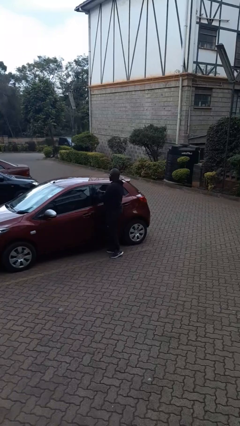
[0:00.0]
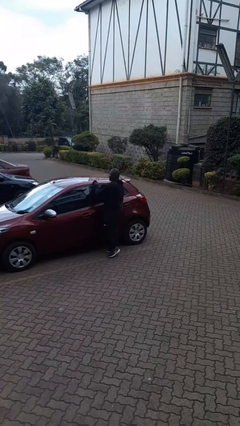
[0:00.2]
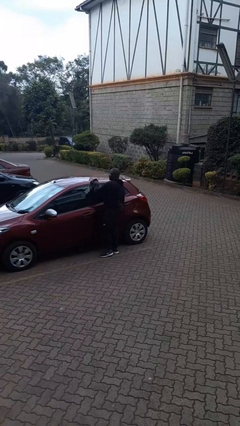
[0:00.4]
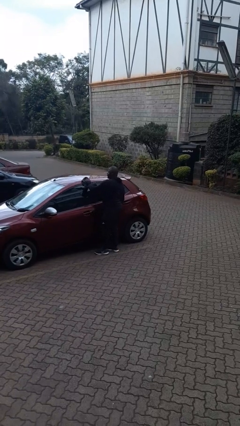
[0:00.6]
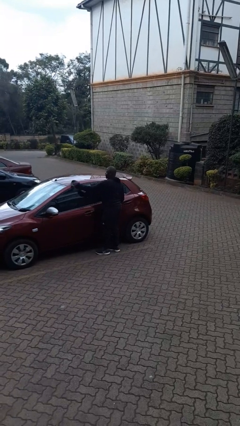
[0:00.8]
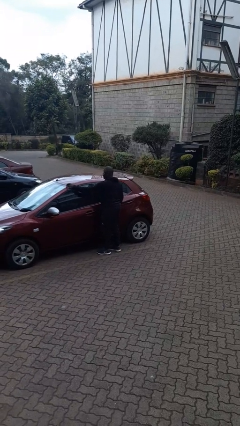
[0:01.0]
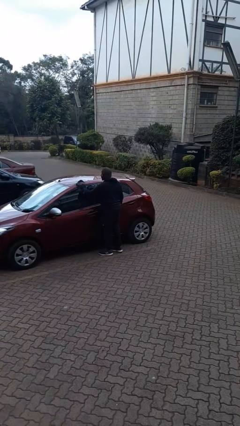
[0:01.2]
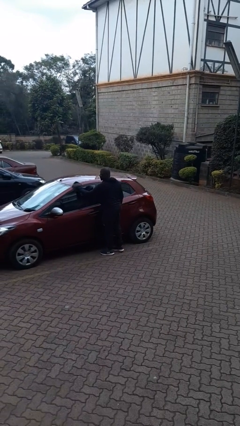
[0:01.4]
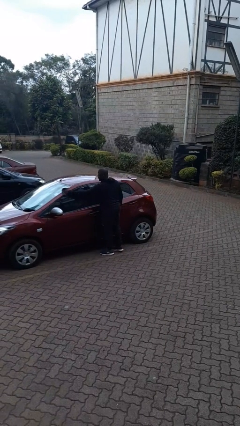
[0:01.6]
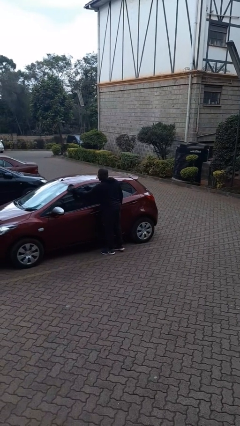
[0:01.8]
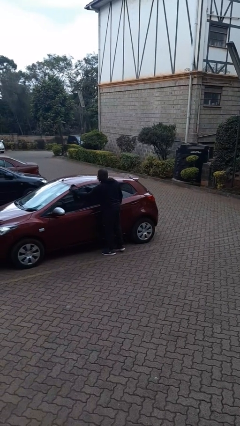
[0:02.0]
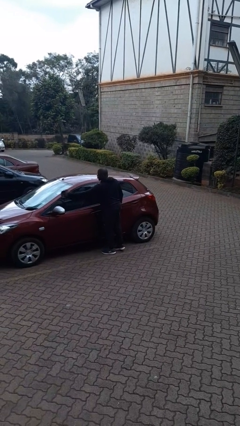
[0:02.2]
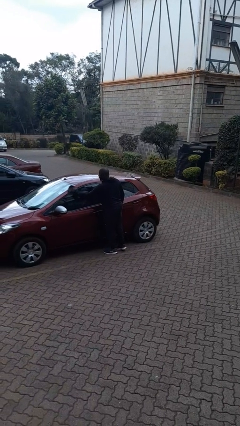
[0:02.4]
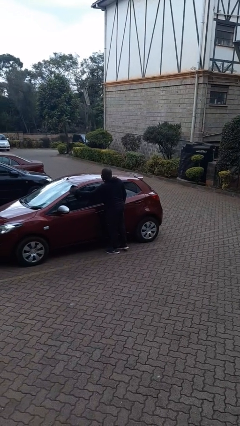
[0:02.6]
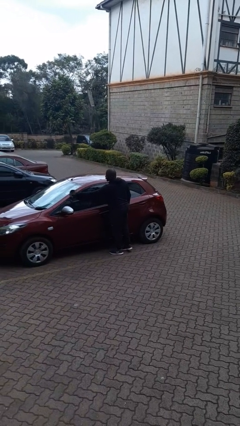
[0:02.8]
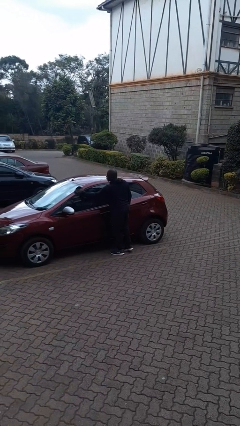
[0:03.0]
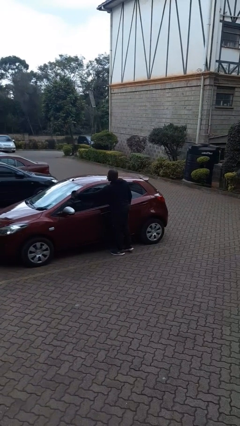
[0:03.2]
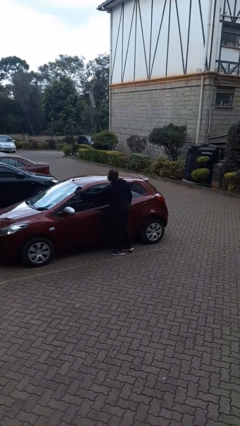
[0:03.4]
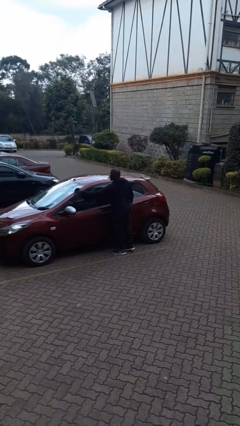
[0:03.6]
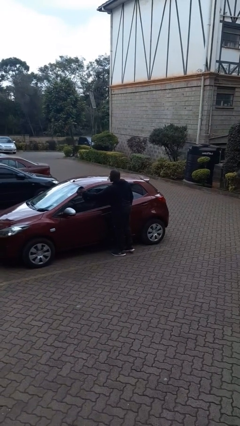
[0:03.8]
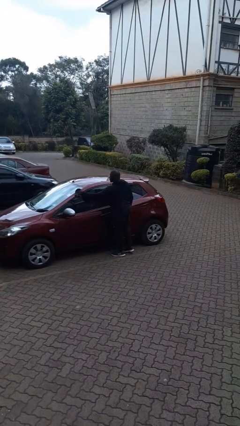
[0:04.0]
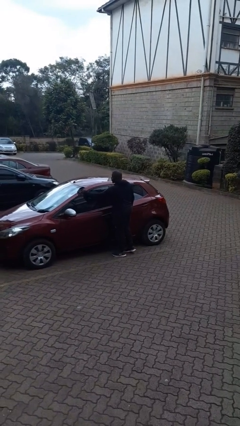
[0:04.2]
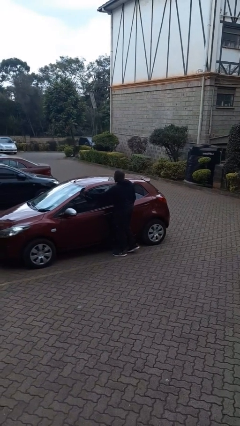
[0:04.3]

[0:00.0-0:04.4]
person polishes car with rag

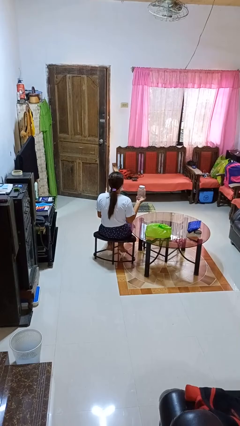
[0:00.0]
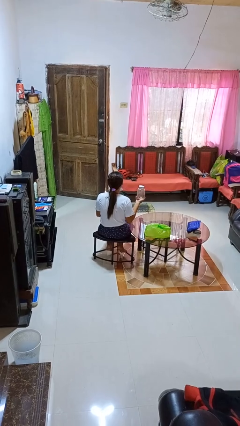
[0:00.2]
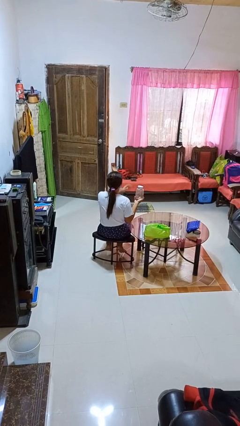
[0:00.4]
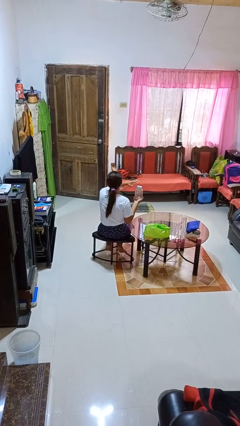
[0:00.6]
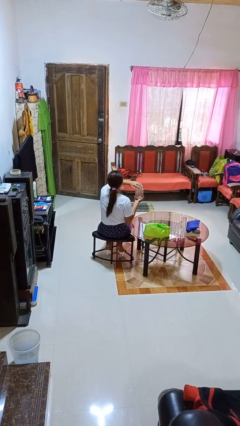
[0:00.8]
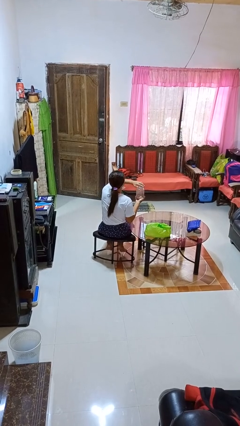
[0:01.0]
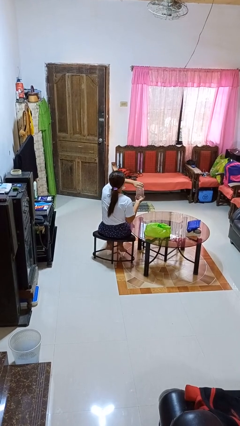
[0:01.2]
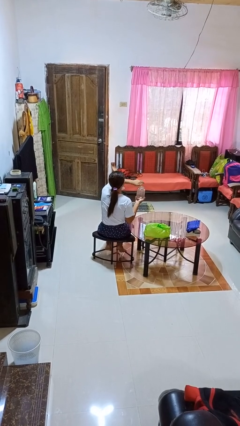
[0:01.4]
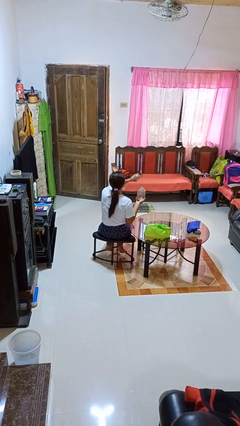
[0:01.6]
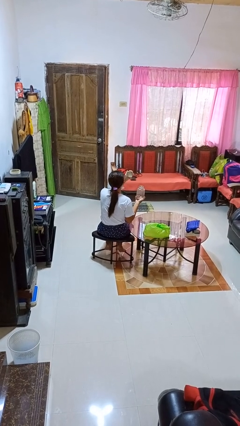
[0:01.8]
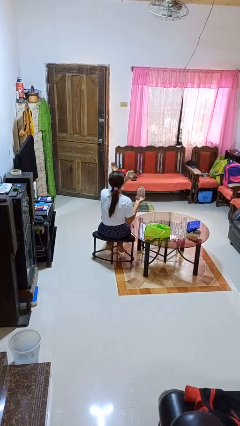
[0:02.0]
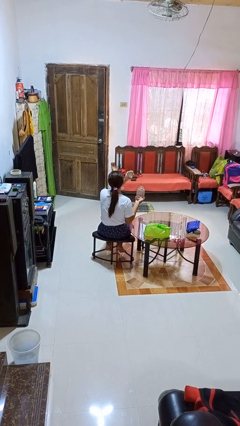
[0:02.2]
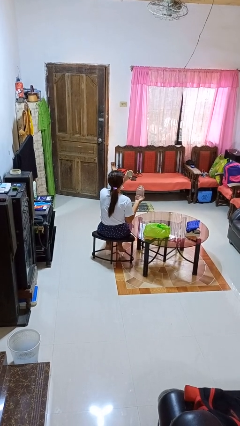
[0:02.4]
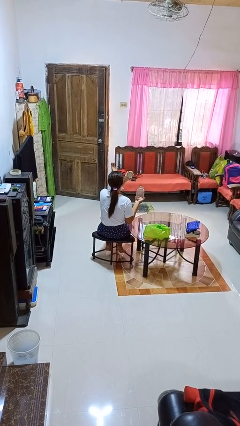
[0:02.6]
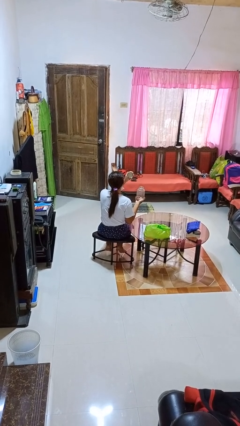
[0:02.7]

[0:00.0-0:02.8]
person opens jar

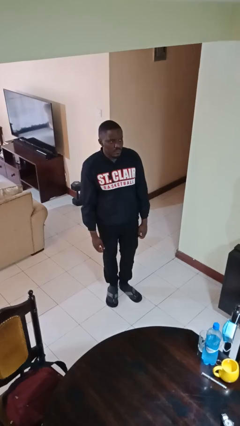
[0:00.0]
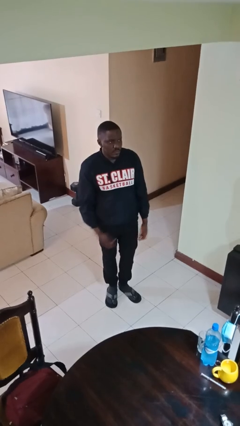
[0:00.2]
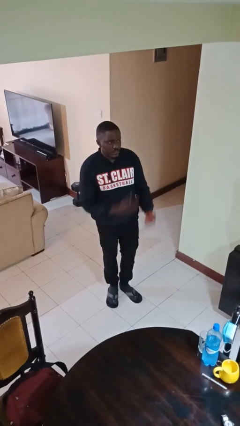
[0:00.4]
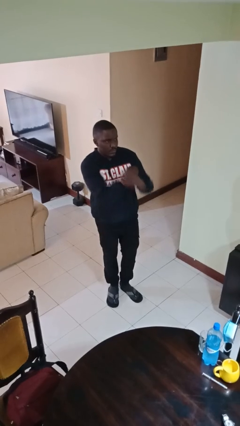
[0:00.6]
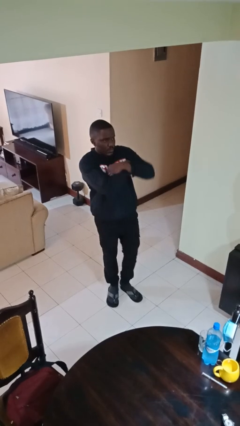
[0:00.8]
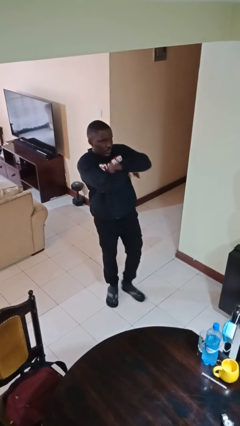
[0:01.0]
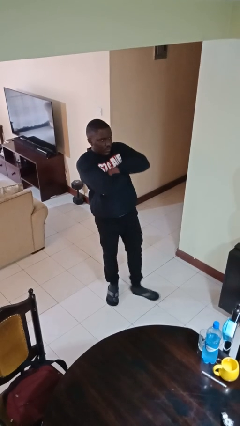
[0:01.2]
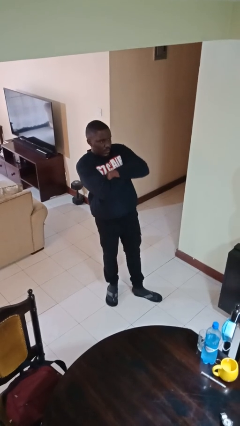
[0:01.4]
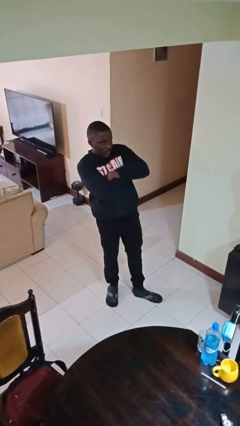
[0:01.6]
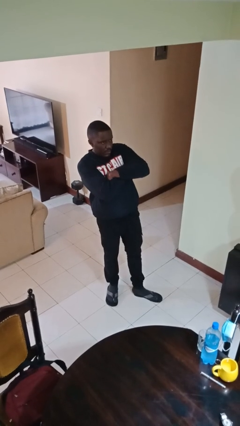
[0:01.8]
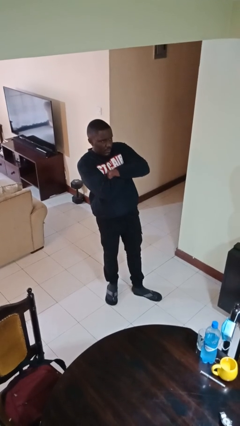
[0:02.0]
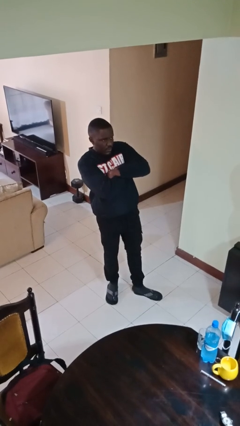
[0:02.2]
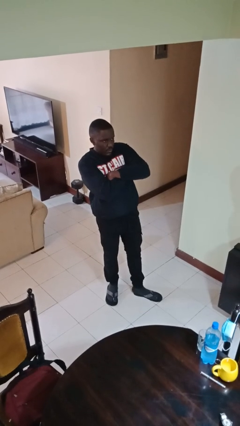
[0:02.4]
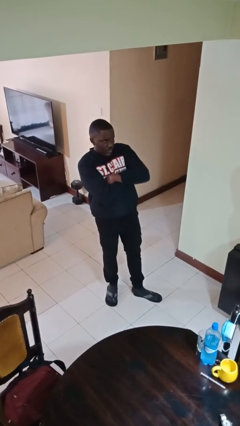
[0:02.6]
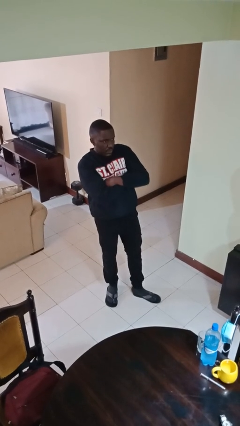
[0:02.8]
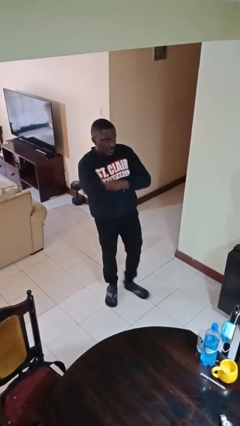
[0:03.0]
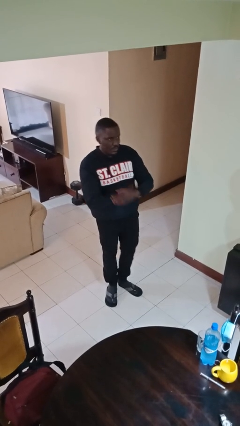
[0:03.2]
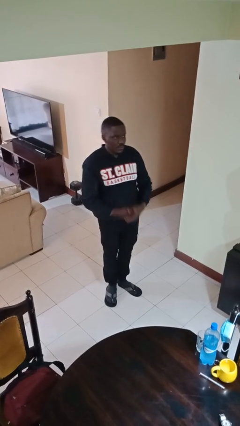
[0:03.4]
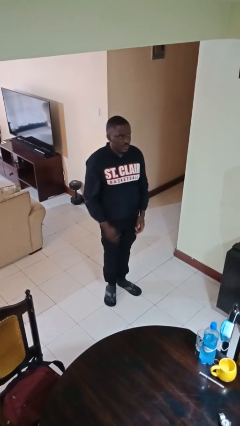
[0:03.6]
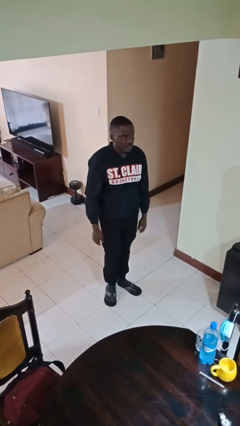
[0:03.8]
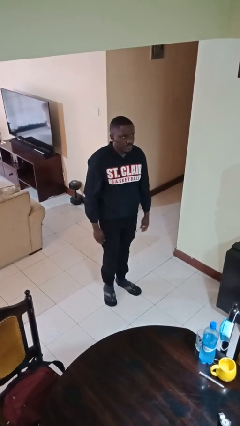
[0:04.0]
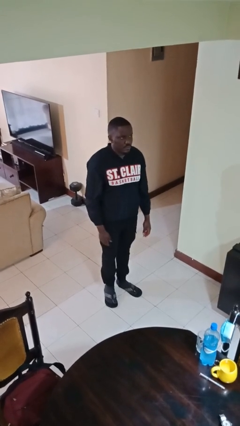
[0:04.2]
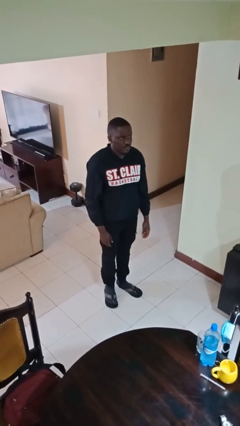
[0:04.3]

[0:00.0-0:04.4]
person crosses arms

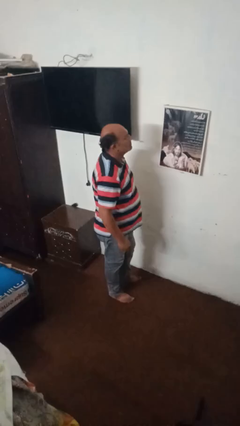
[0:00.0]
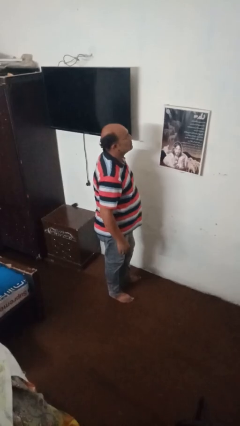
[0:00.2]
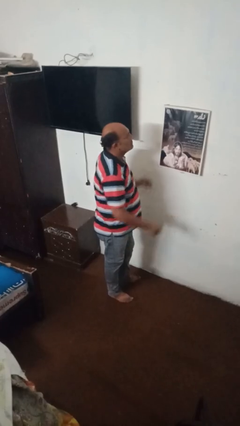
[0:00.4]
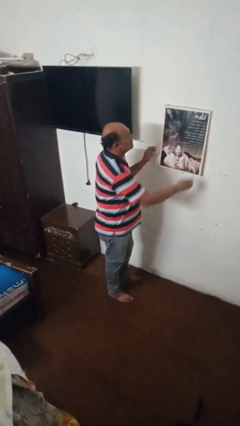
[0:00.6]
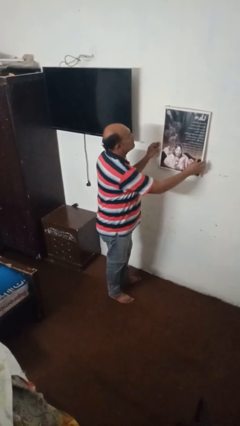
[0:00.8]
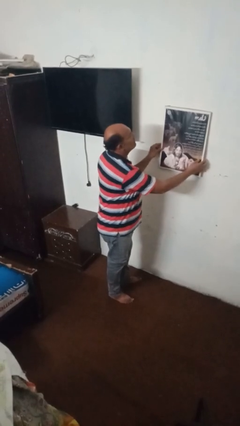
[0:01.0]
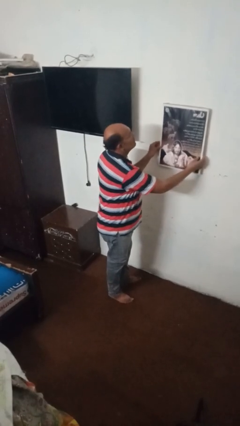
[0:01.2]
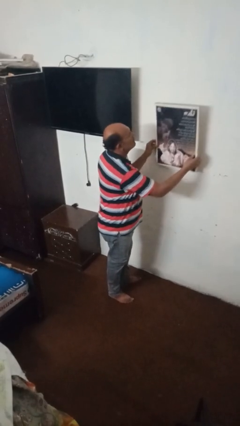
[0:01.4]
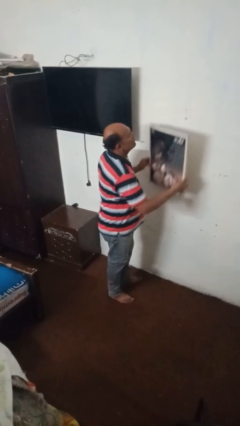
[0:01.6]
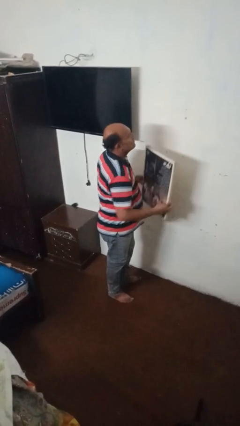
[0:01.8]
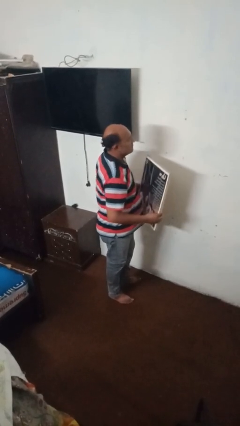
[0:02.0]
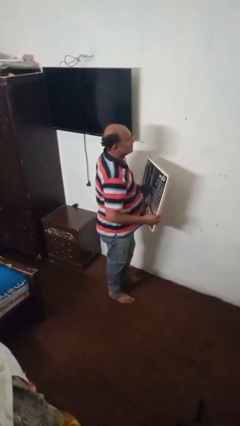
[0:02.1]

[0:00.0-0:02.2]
person takes down picture frame

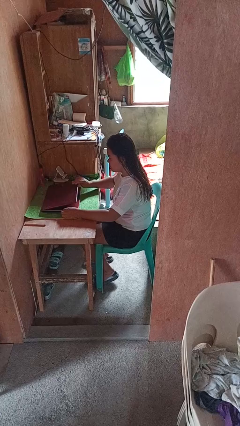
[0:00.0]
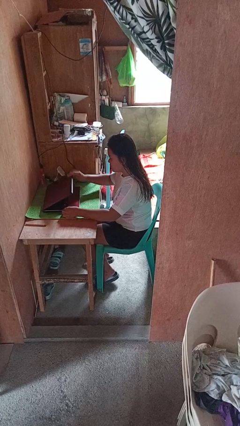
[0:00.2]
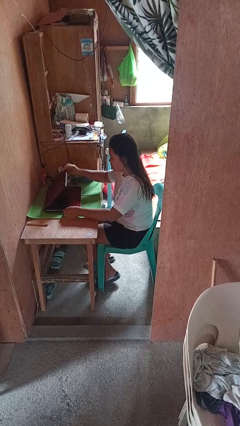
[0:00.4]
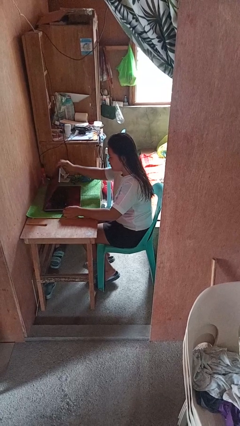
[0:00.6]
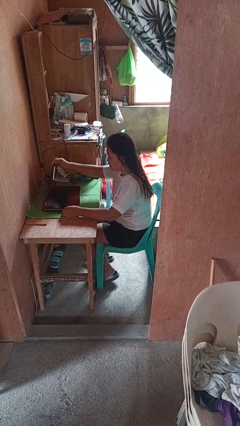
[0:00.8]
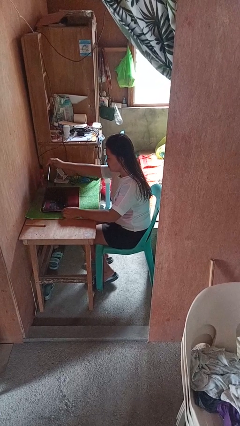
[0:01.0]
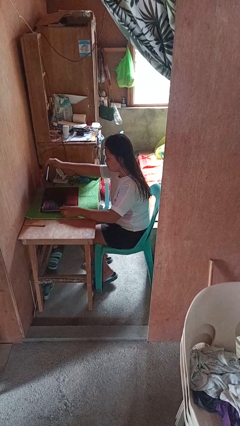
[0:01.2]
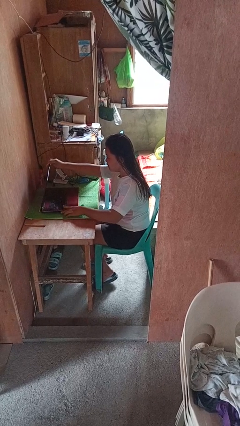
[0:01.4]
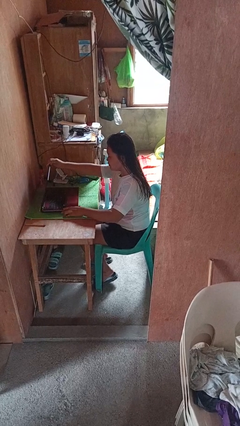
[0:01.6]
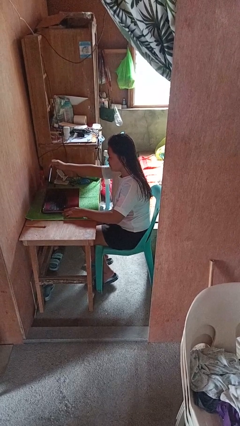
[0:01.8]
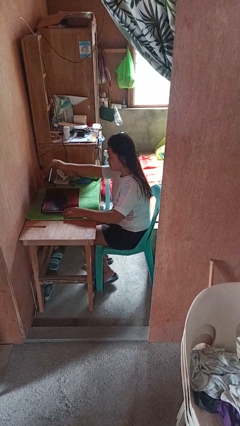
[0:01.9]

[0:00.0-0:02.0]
person opens laptop

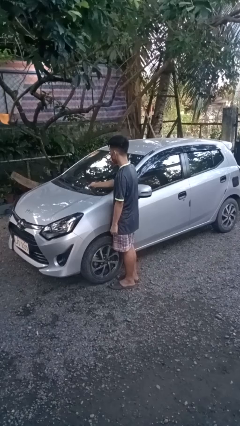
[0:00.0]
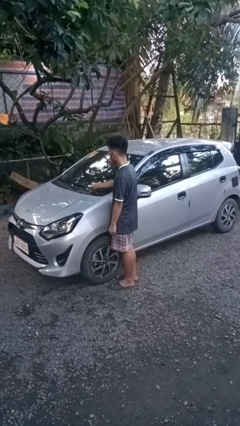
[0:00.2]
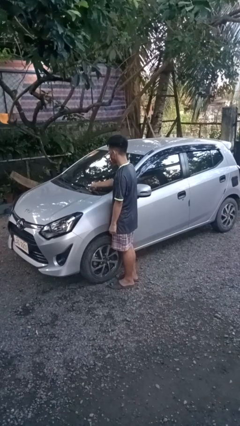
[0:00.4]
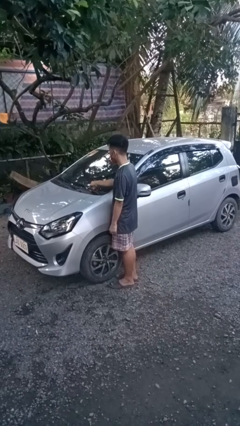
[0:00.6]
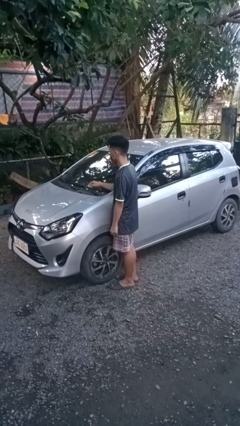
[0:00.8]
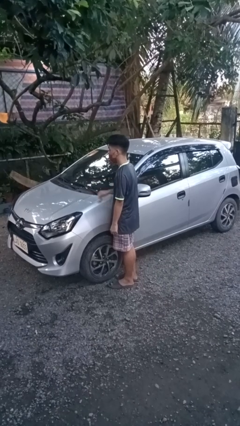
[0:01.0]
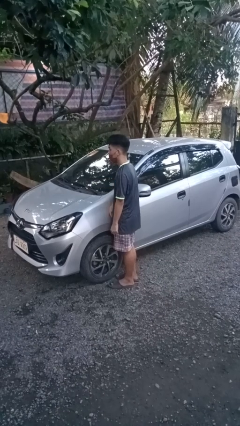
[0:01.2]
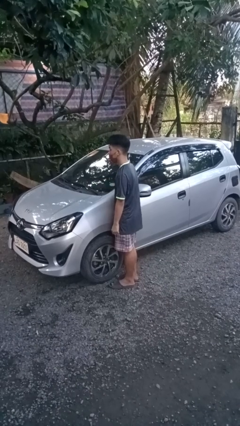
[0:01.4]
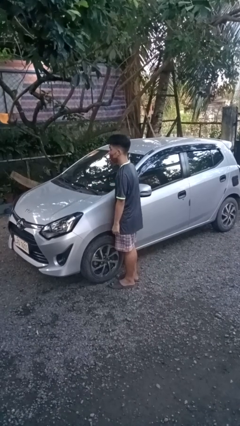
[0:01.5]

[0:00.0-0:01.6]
person flips down car wipers
